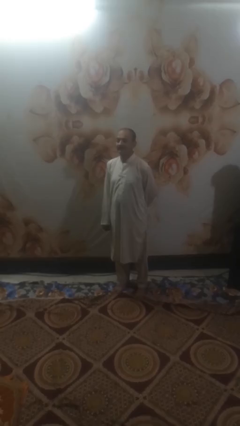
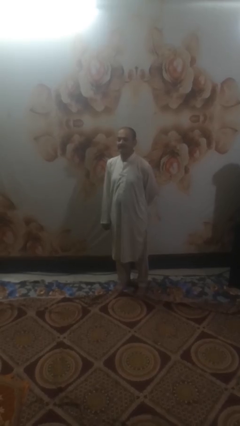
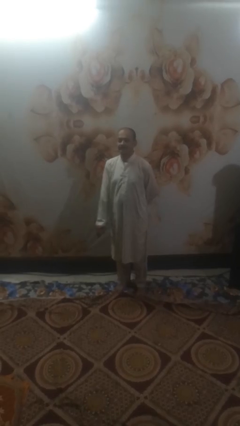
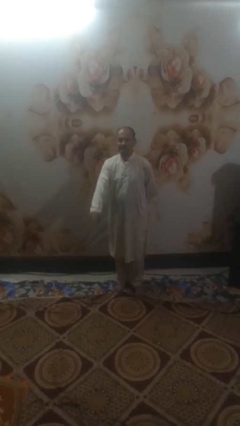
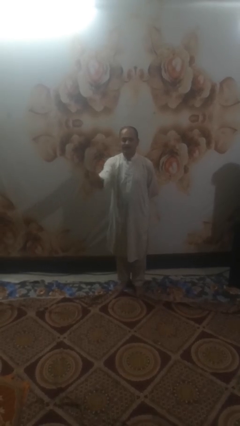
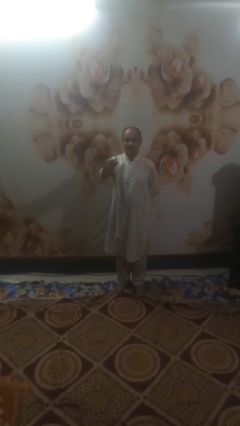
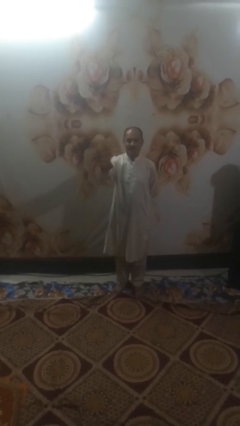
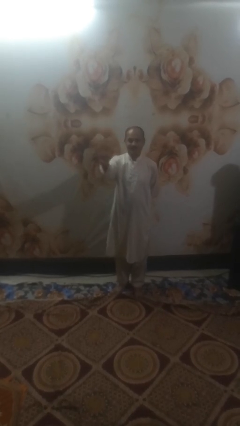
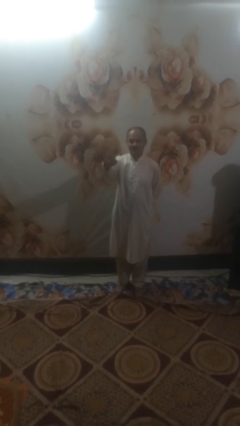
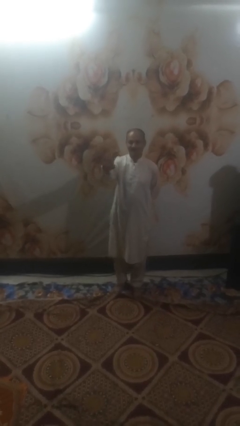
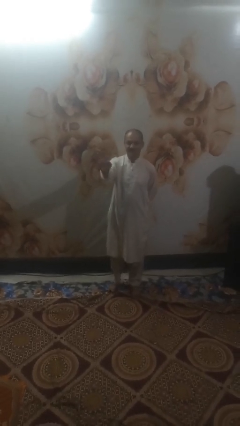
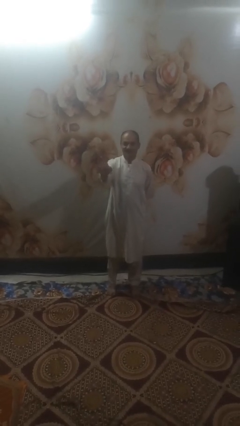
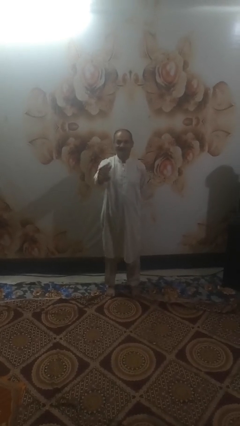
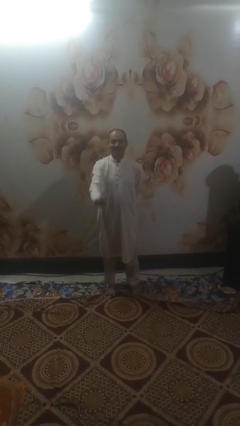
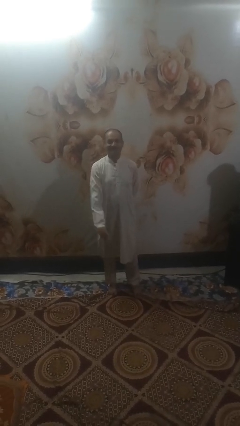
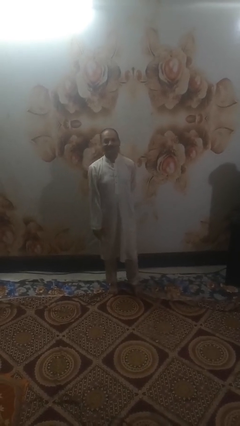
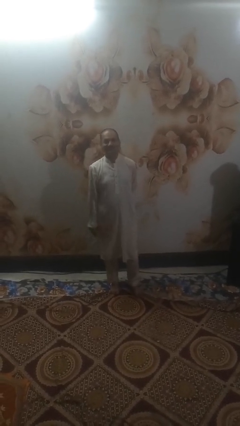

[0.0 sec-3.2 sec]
person waves at person

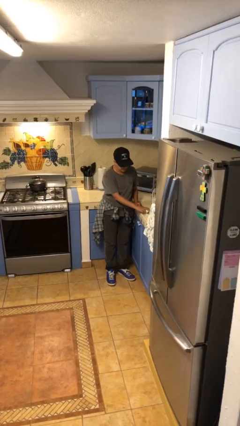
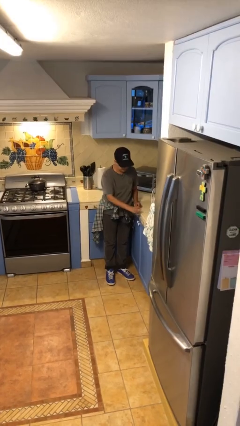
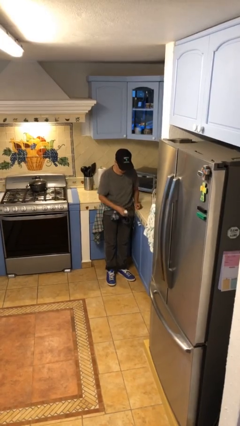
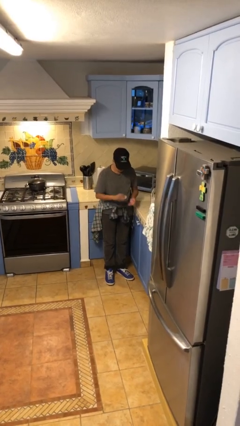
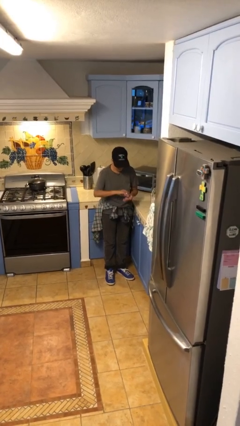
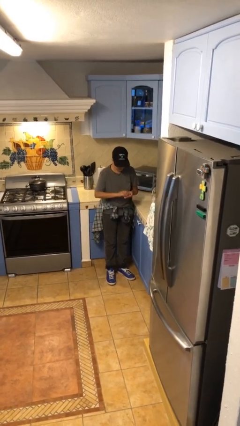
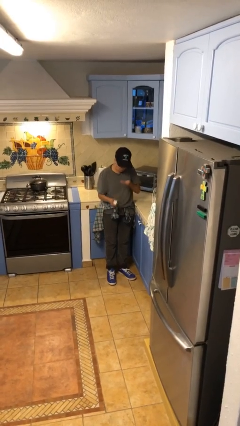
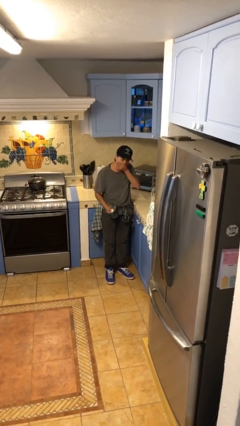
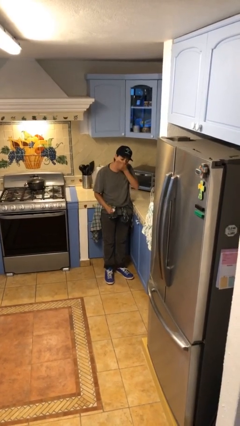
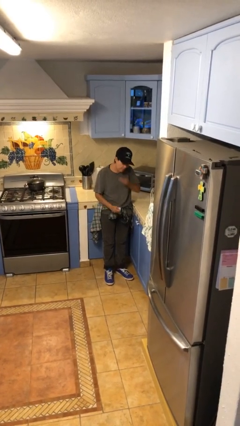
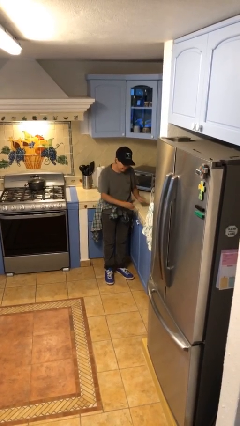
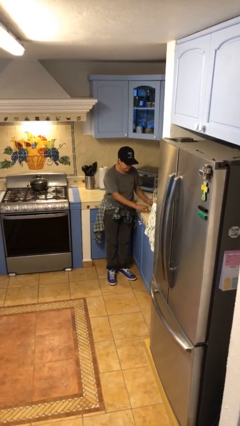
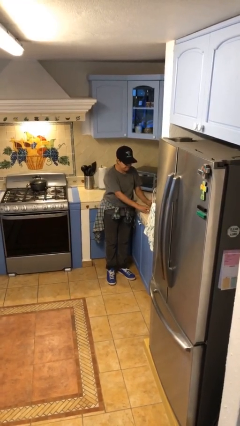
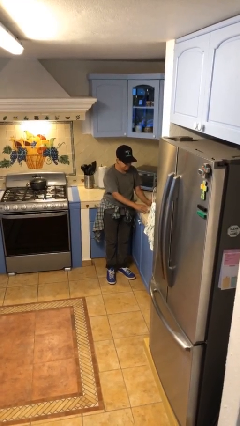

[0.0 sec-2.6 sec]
person takes medicine pills

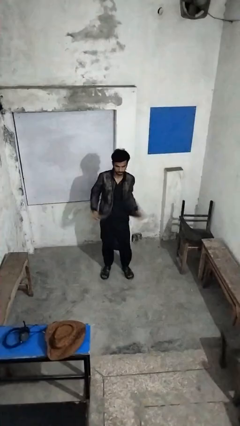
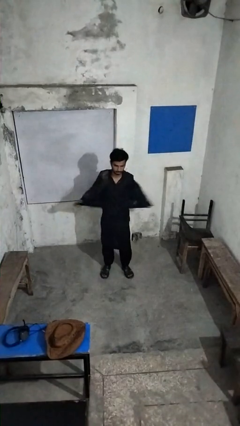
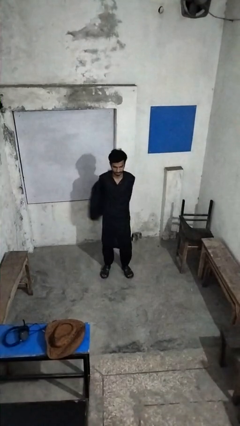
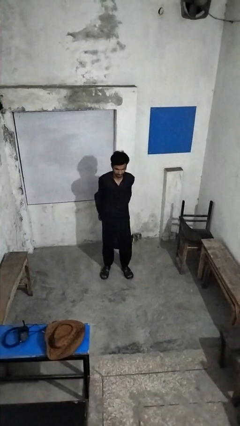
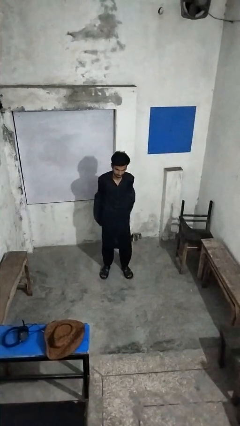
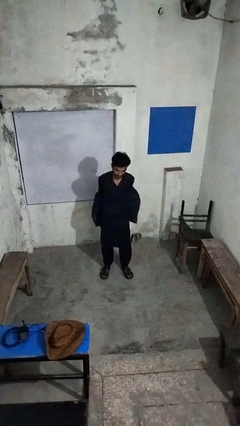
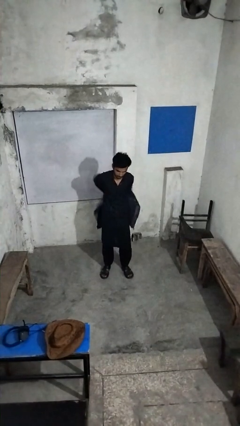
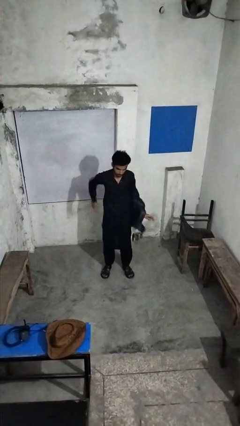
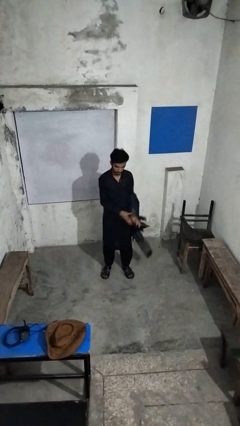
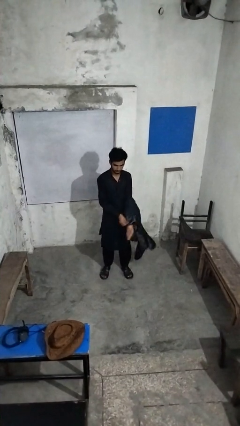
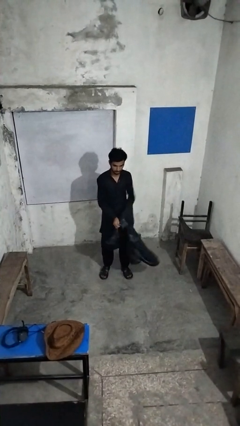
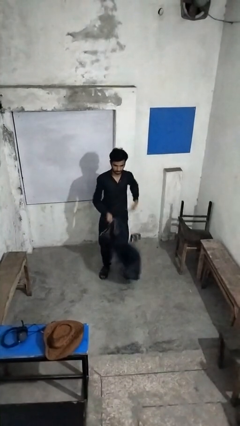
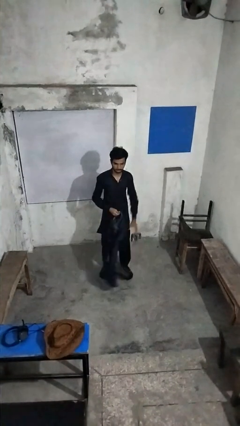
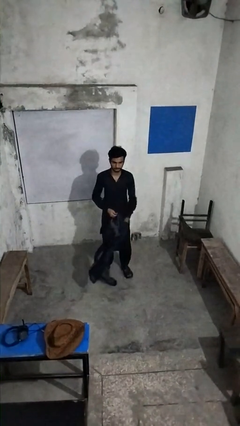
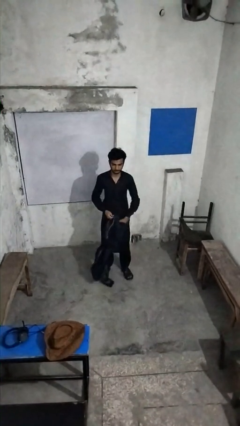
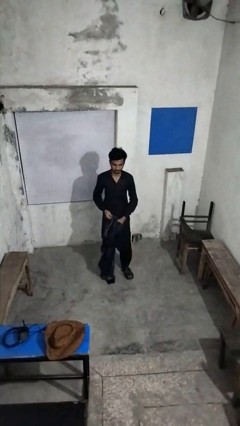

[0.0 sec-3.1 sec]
person takes off jacket

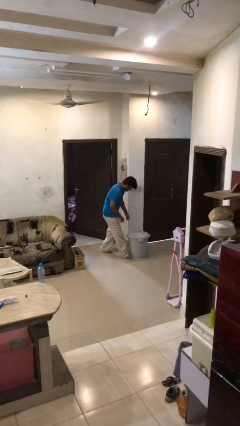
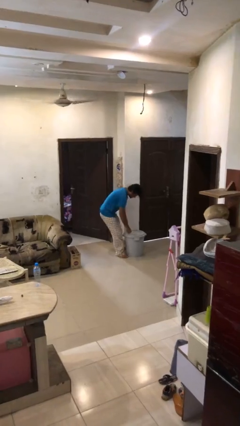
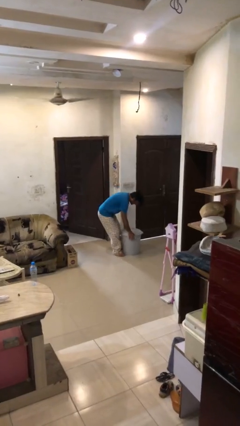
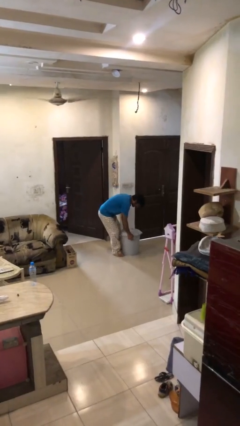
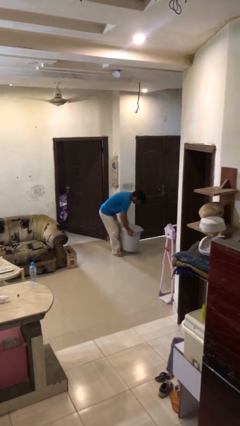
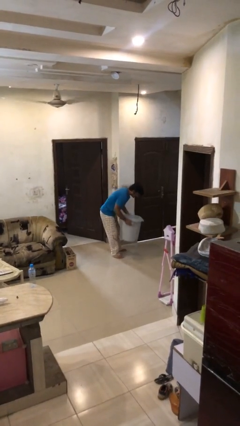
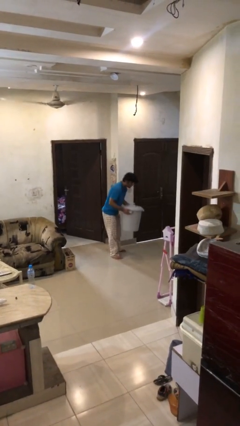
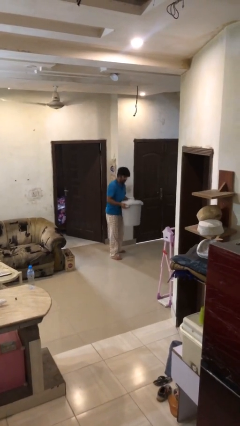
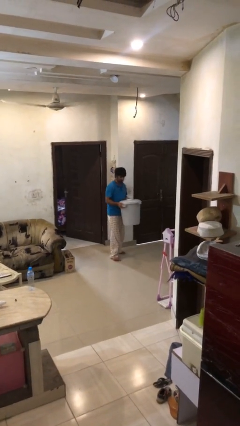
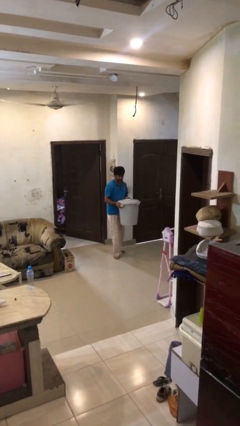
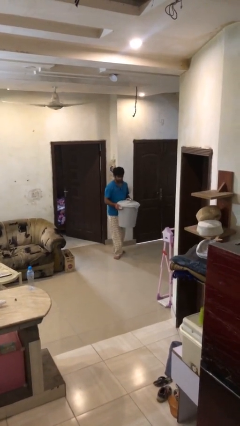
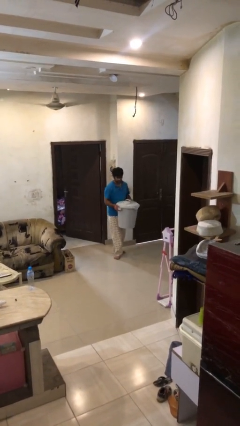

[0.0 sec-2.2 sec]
person picks up object from floor

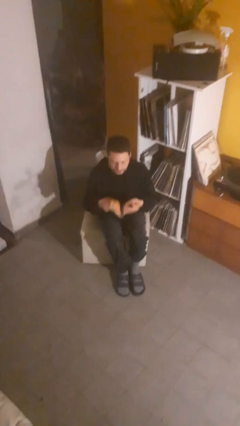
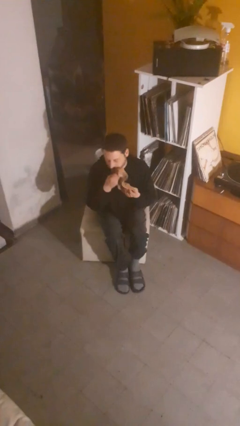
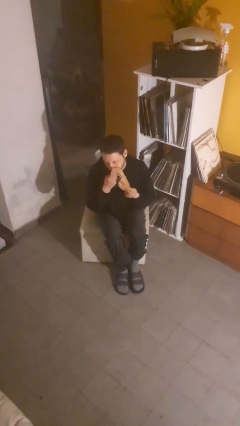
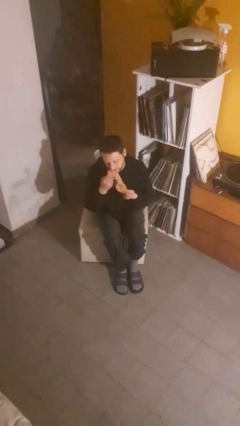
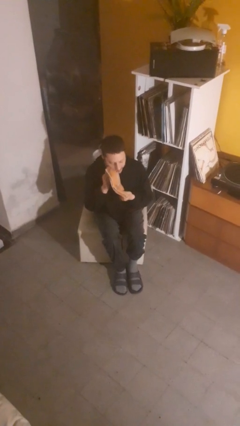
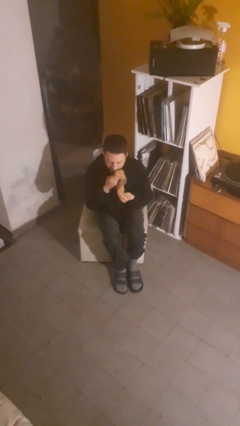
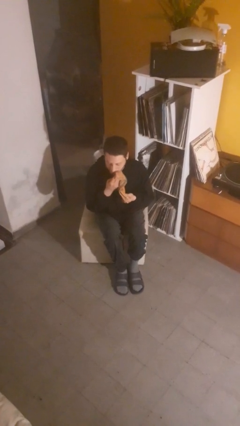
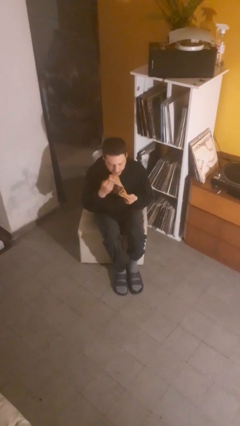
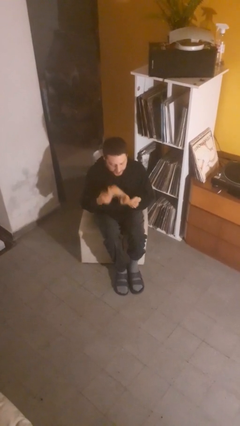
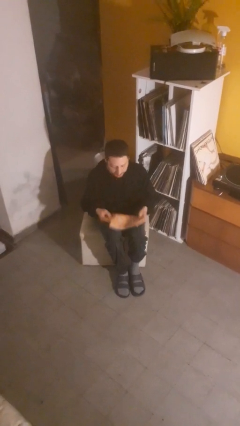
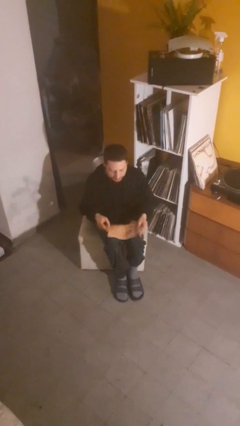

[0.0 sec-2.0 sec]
person wipes mouth with napkin

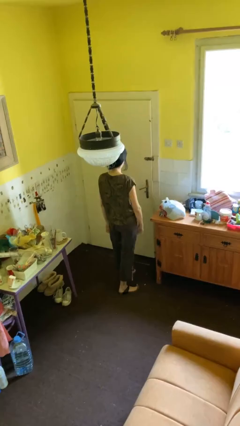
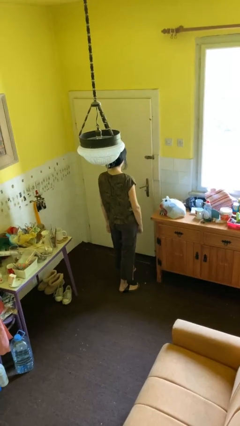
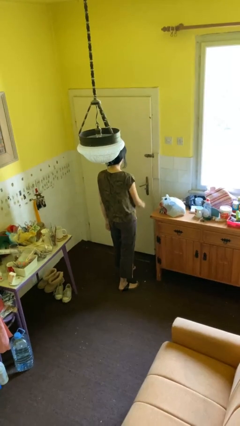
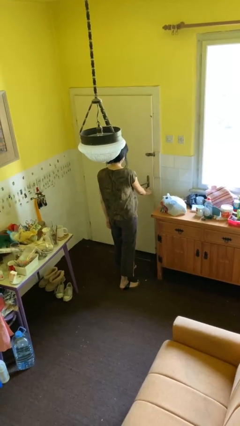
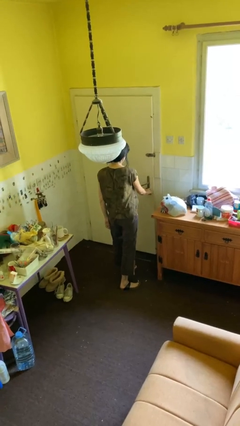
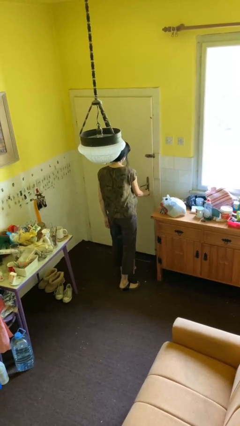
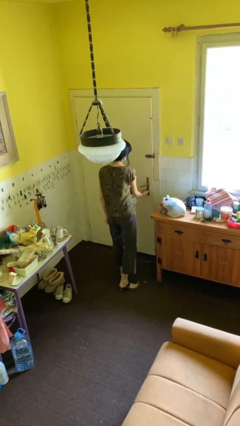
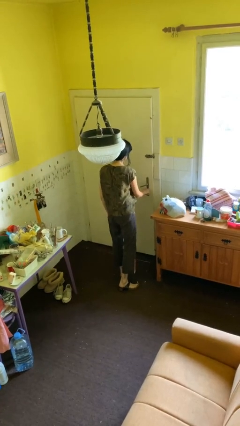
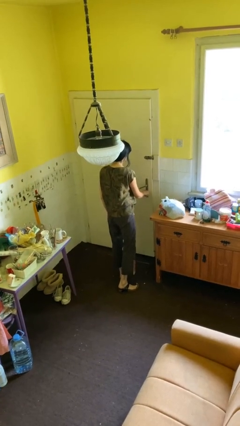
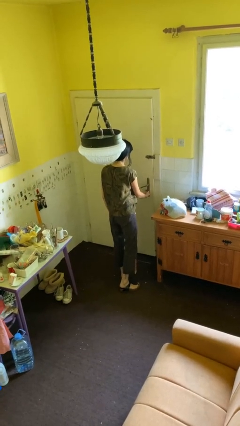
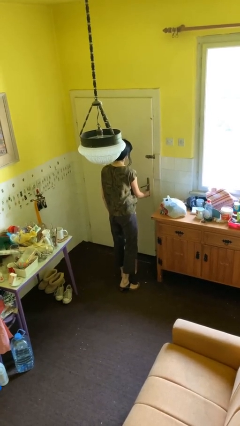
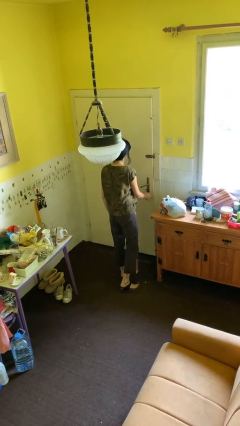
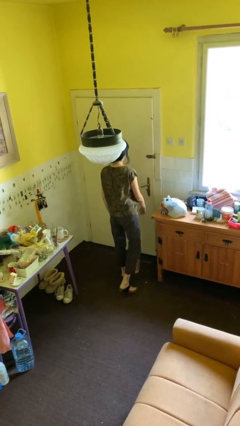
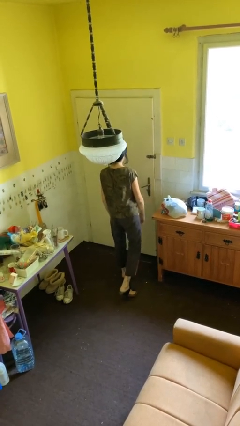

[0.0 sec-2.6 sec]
person locks door with keys

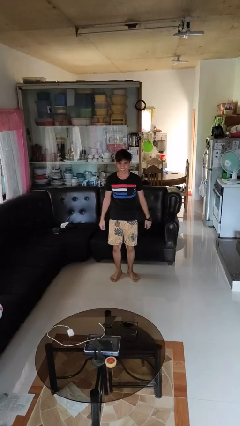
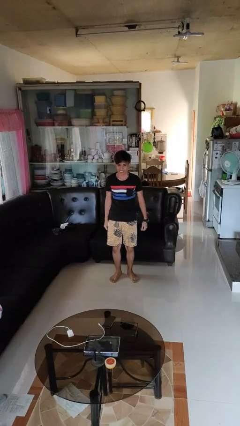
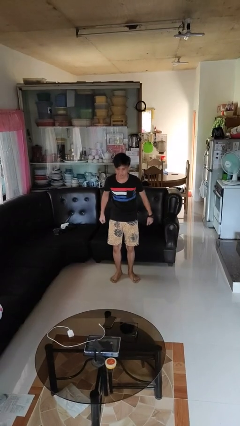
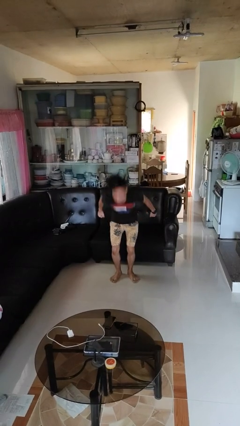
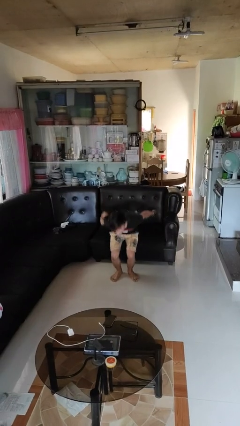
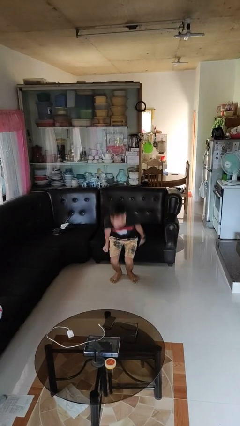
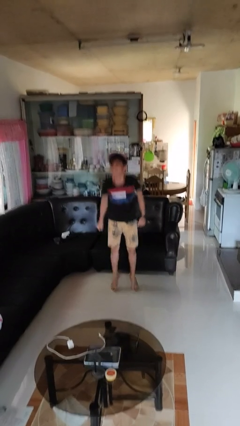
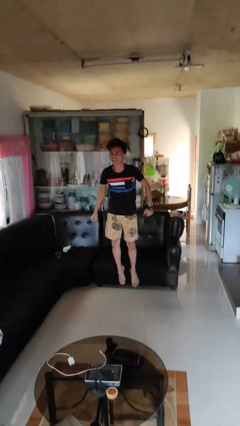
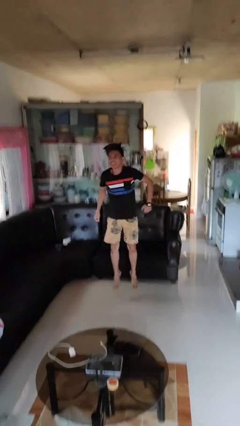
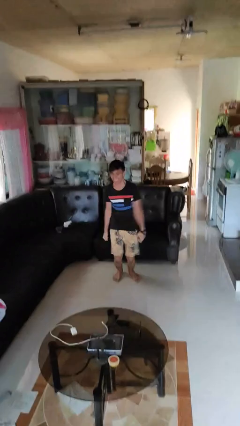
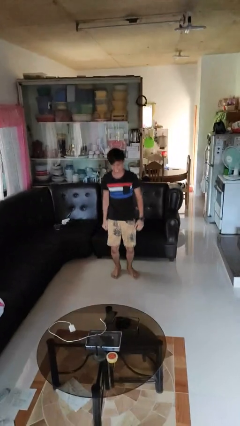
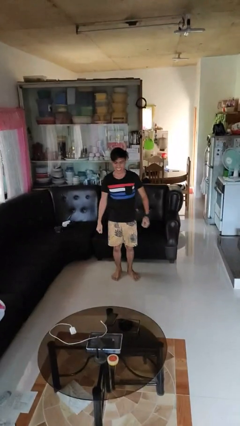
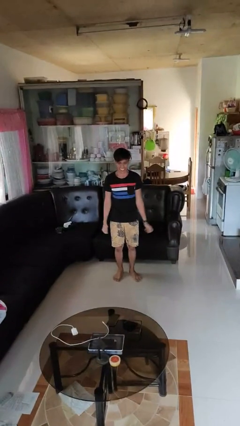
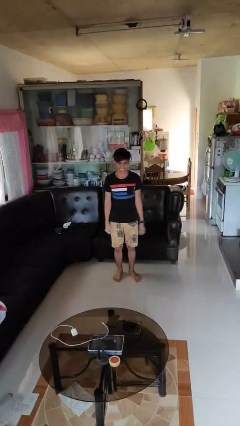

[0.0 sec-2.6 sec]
person jumps
